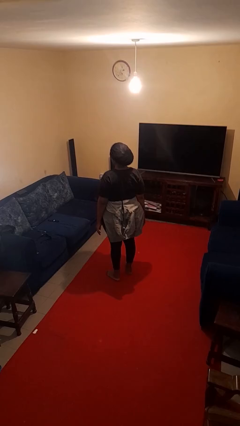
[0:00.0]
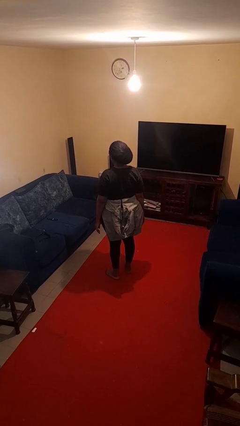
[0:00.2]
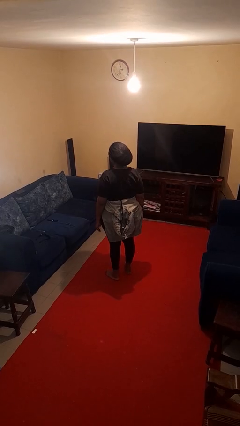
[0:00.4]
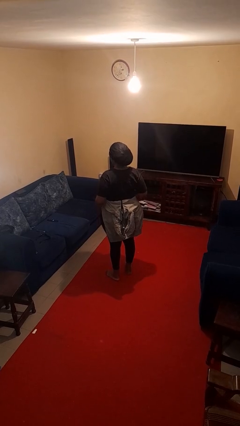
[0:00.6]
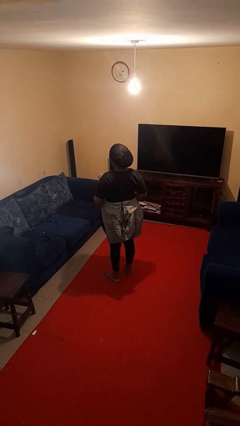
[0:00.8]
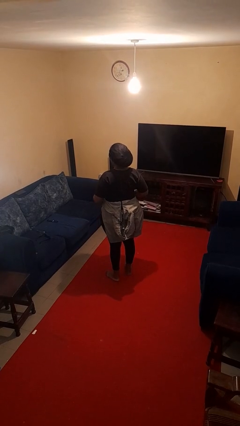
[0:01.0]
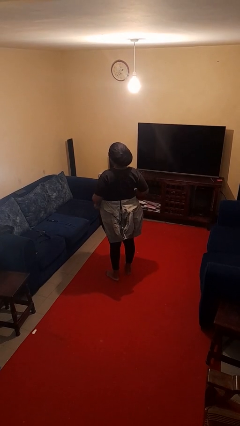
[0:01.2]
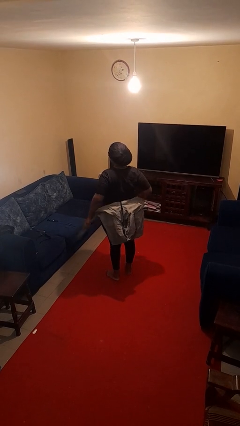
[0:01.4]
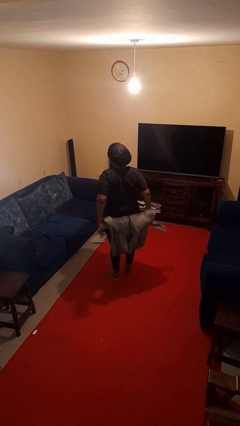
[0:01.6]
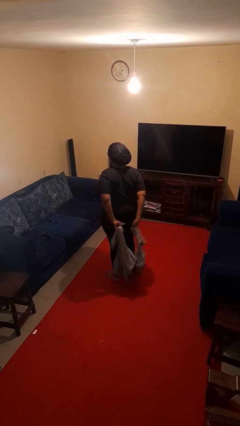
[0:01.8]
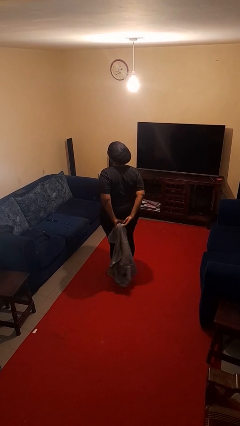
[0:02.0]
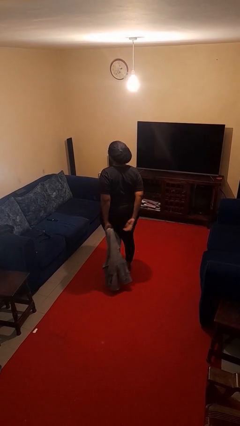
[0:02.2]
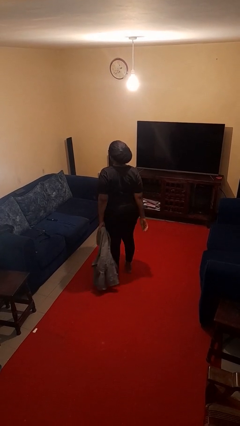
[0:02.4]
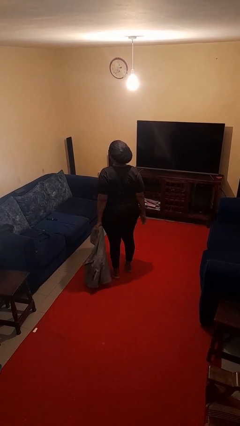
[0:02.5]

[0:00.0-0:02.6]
person unties jacket around waist

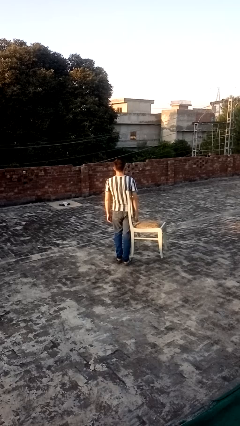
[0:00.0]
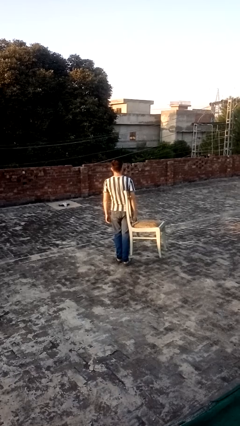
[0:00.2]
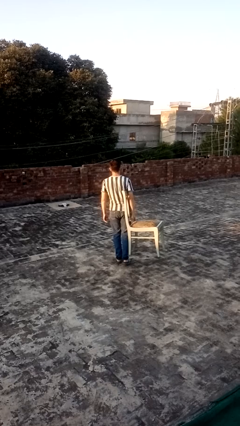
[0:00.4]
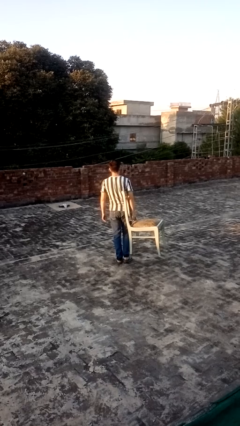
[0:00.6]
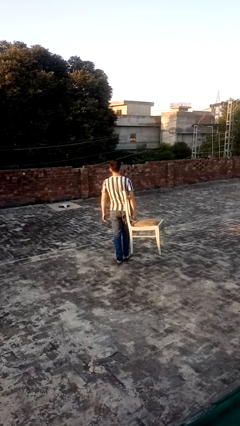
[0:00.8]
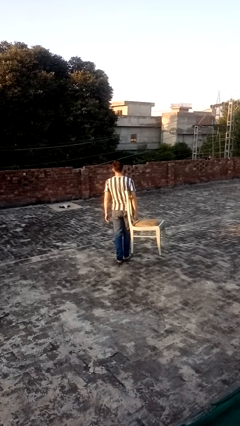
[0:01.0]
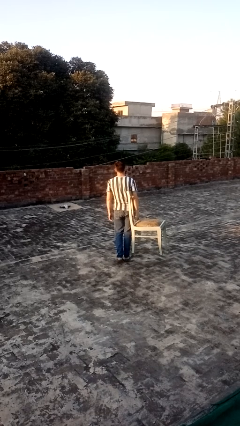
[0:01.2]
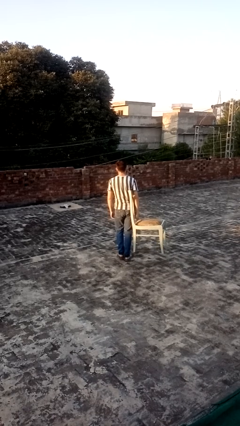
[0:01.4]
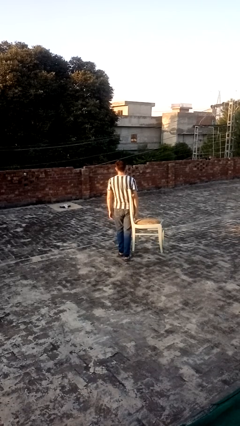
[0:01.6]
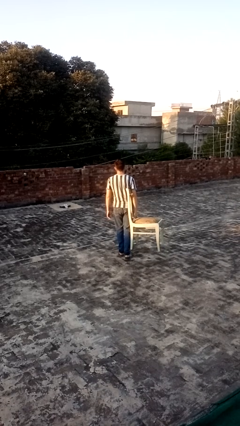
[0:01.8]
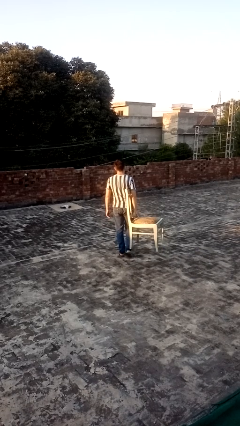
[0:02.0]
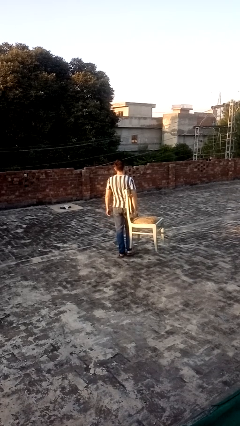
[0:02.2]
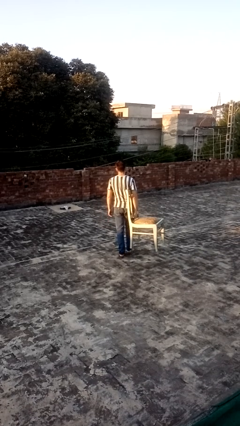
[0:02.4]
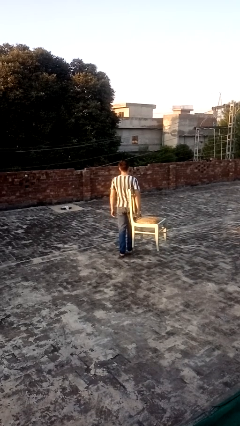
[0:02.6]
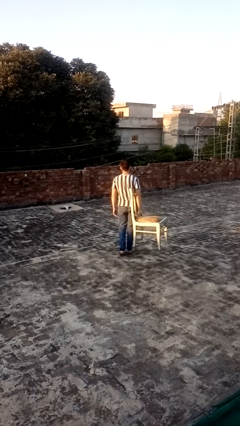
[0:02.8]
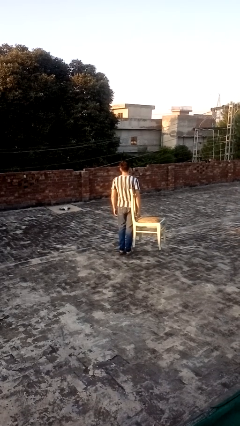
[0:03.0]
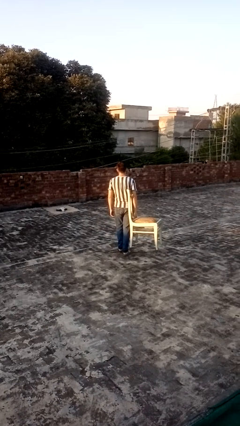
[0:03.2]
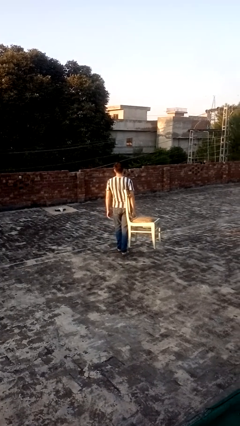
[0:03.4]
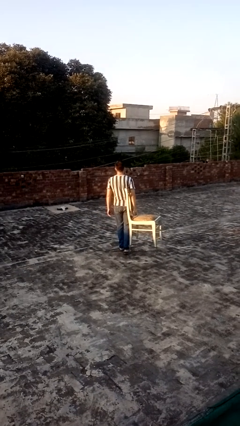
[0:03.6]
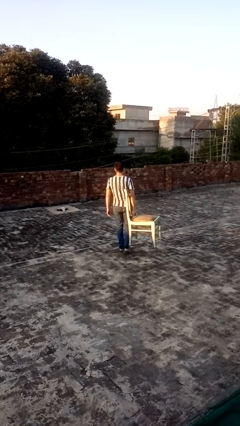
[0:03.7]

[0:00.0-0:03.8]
person carries furniture

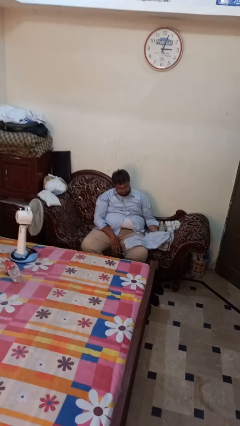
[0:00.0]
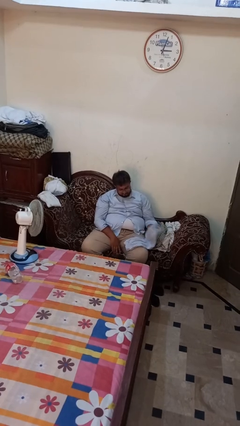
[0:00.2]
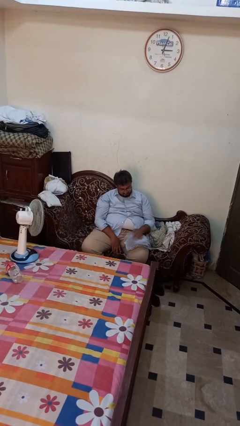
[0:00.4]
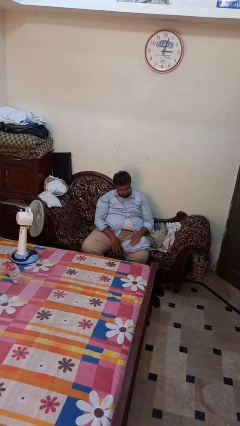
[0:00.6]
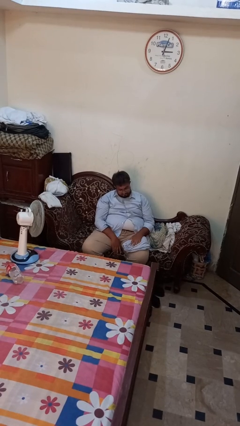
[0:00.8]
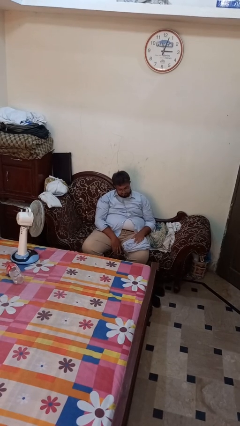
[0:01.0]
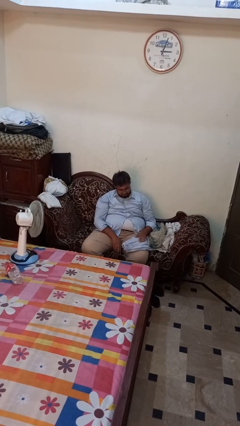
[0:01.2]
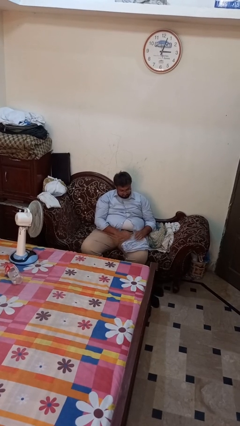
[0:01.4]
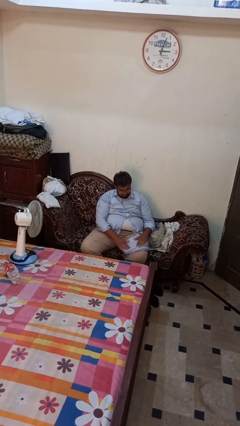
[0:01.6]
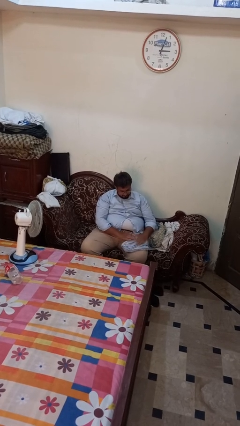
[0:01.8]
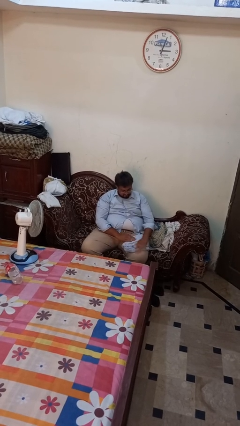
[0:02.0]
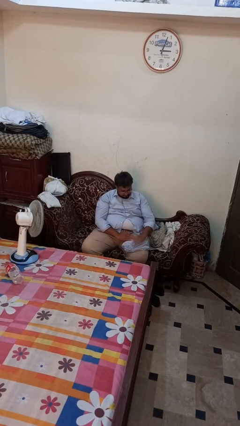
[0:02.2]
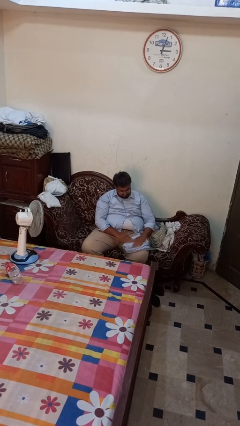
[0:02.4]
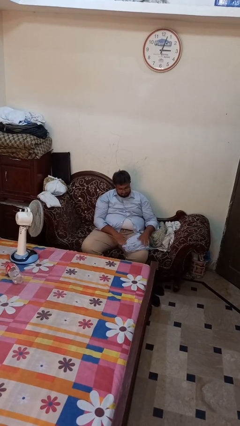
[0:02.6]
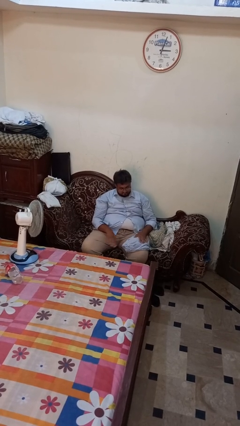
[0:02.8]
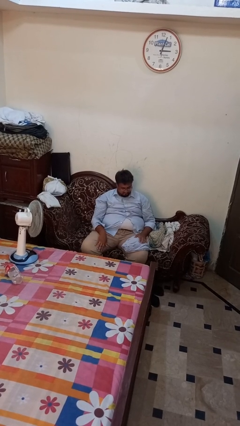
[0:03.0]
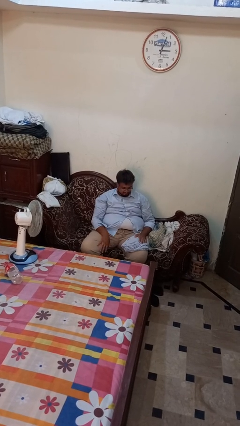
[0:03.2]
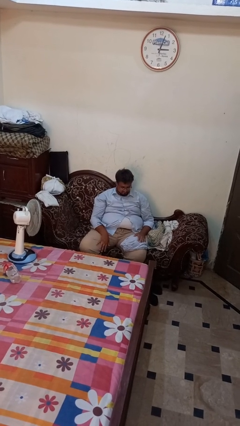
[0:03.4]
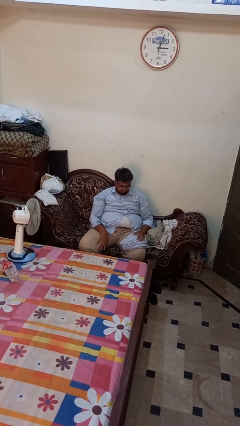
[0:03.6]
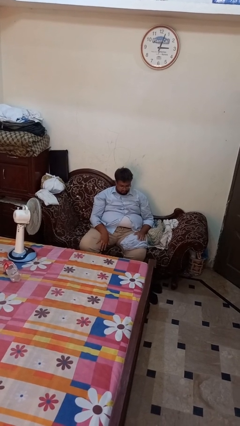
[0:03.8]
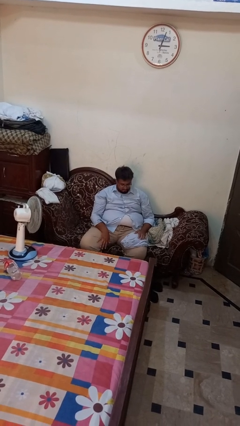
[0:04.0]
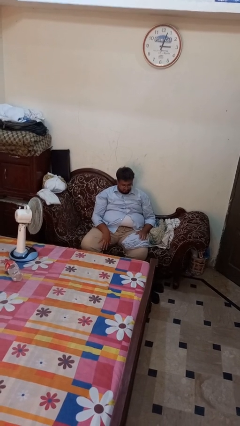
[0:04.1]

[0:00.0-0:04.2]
person folds pants

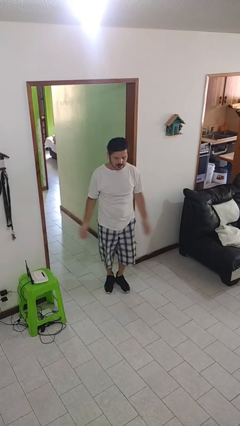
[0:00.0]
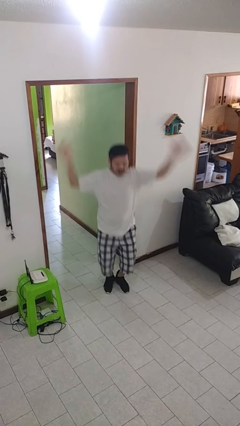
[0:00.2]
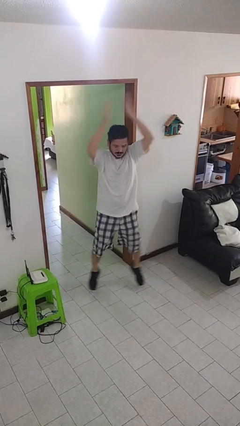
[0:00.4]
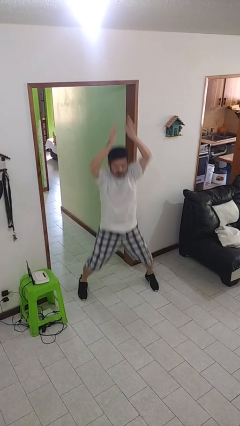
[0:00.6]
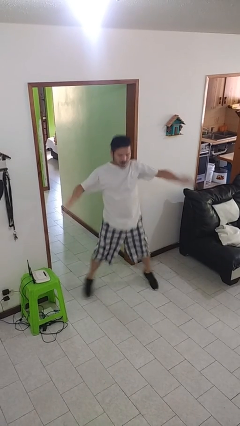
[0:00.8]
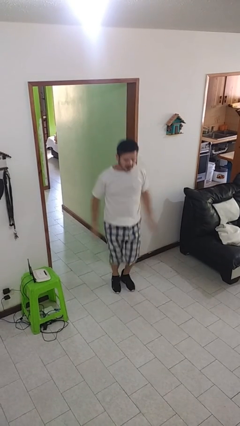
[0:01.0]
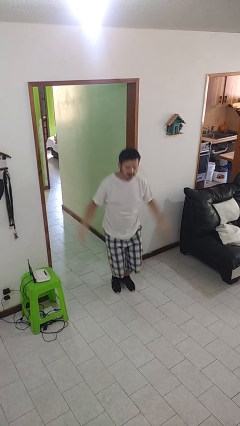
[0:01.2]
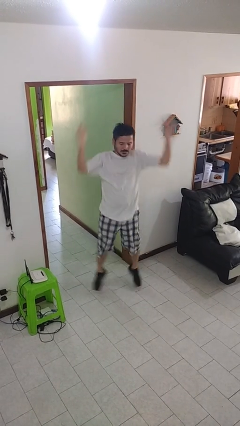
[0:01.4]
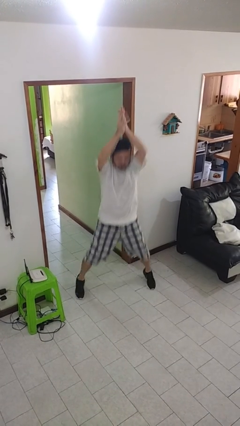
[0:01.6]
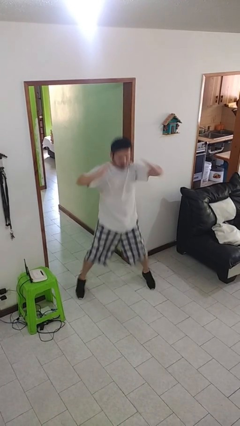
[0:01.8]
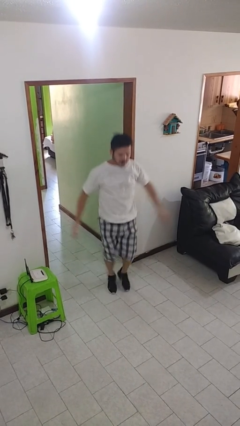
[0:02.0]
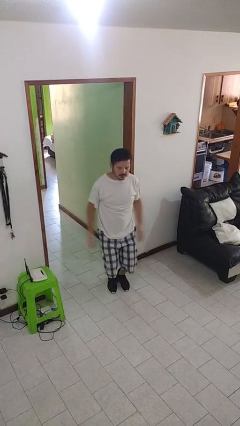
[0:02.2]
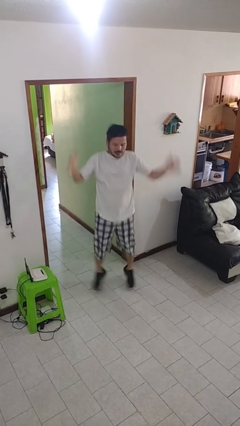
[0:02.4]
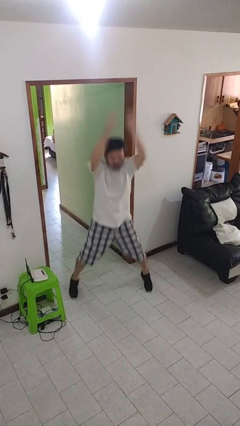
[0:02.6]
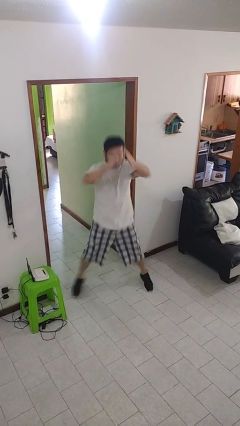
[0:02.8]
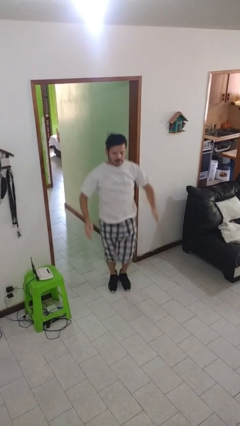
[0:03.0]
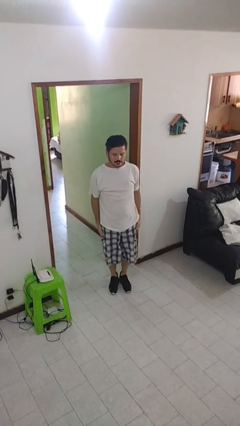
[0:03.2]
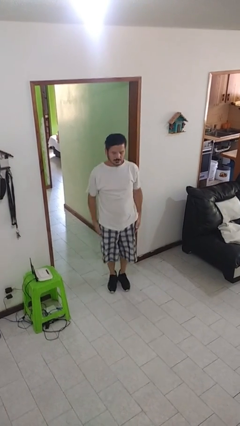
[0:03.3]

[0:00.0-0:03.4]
person exercises with jumping jacks

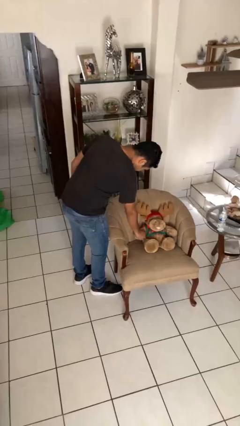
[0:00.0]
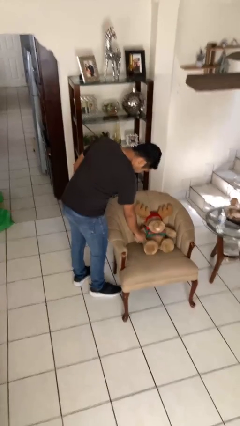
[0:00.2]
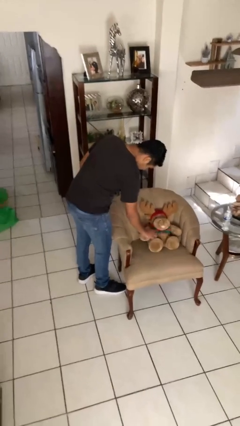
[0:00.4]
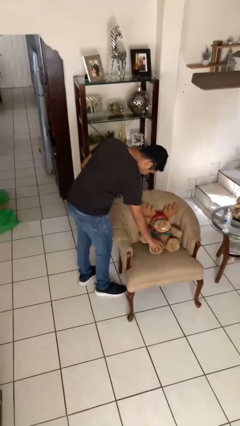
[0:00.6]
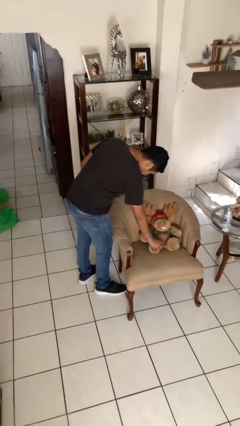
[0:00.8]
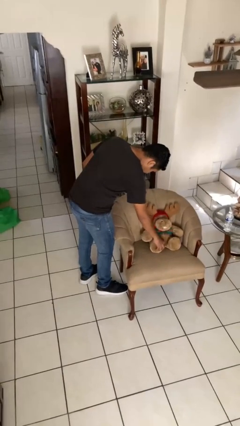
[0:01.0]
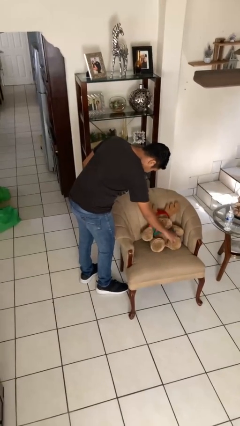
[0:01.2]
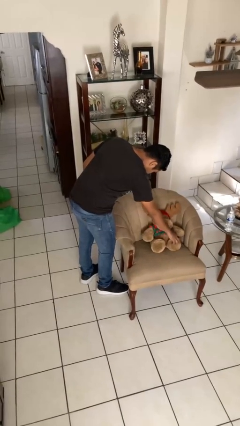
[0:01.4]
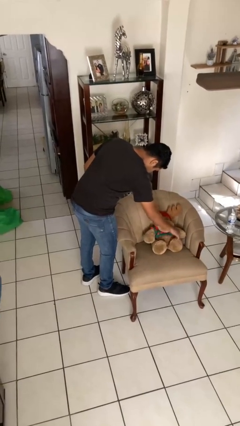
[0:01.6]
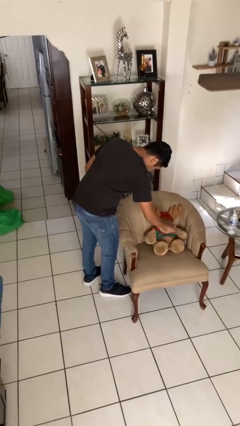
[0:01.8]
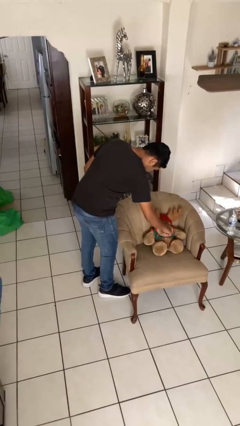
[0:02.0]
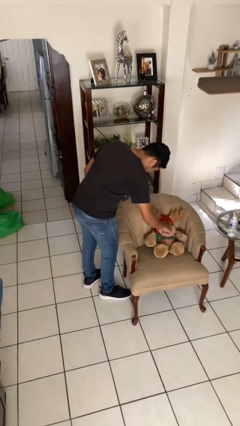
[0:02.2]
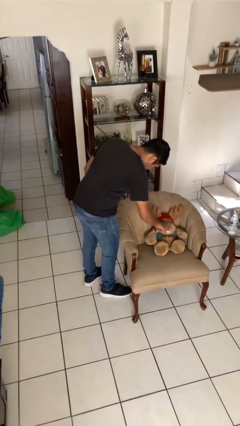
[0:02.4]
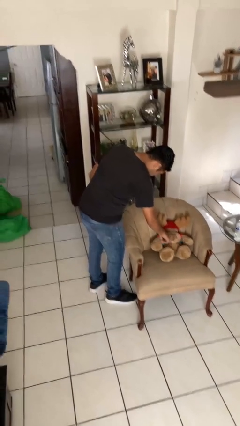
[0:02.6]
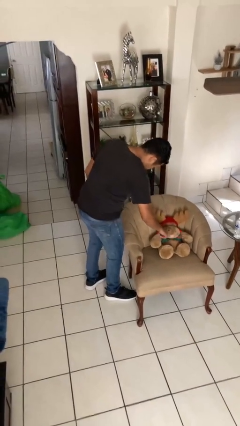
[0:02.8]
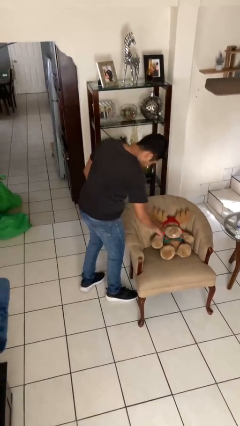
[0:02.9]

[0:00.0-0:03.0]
person taps object with finger

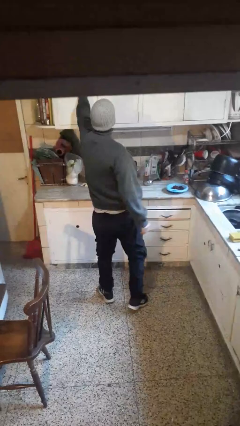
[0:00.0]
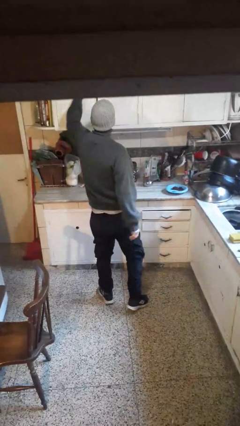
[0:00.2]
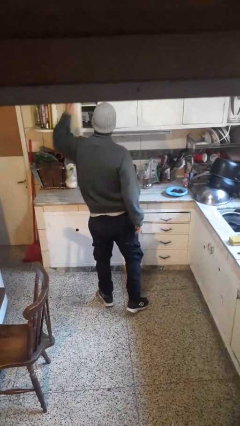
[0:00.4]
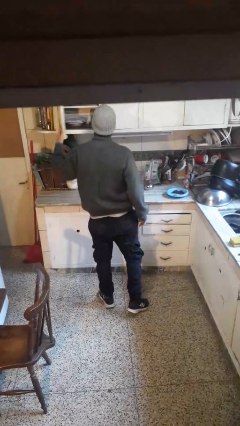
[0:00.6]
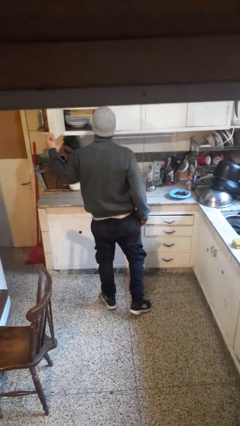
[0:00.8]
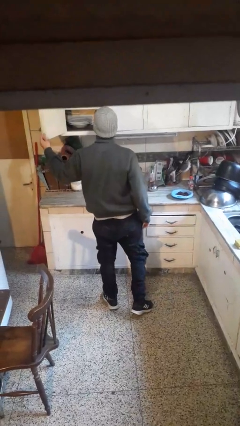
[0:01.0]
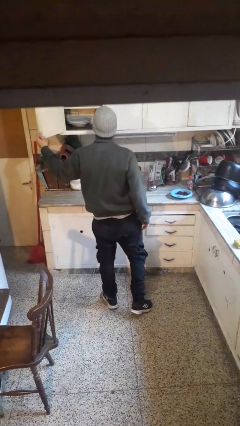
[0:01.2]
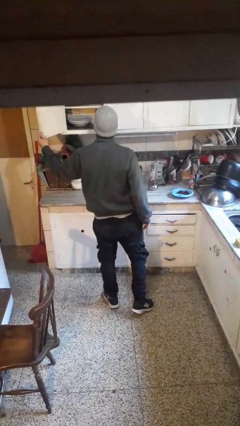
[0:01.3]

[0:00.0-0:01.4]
person opens cabinet
